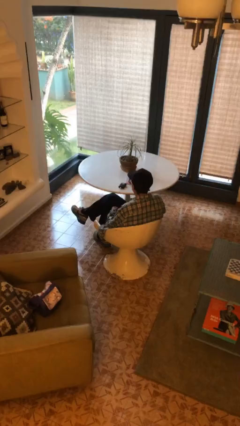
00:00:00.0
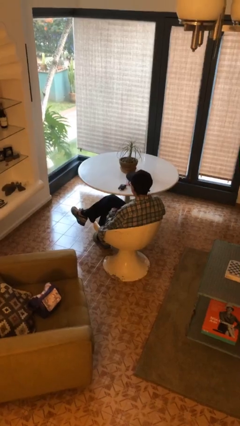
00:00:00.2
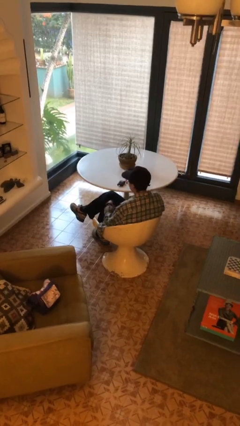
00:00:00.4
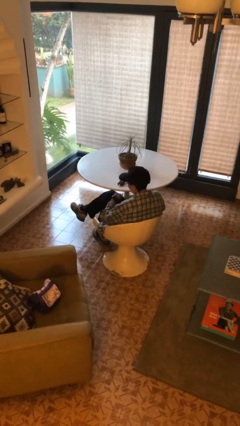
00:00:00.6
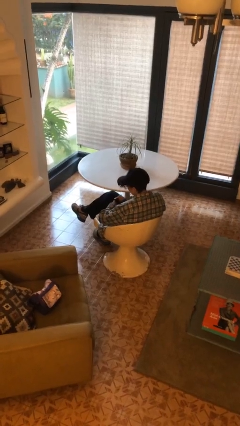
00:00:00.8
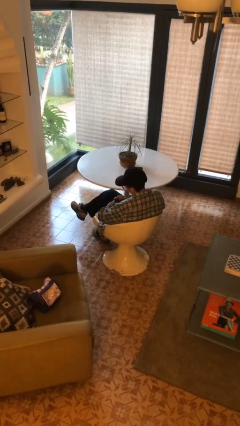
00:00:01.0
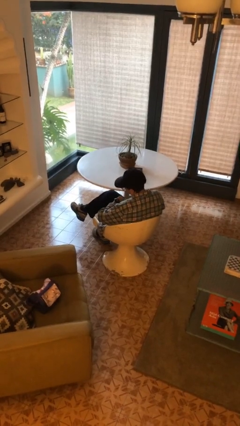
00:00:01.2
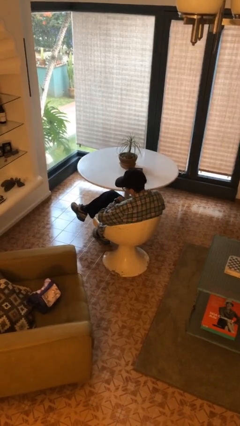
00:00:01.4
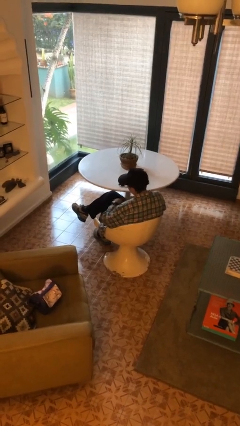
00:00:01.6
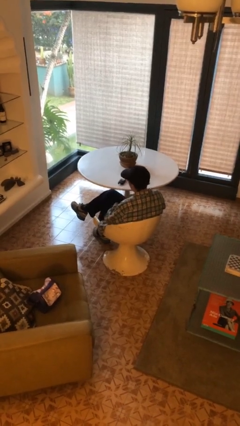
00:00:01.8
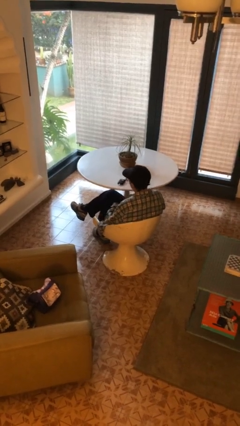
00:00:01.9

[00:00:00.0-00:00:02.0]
person looks at wristwatch

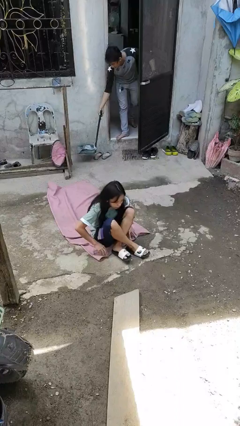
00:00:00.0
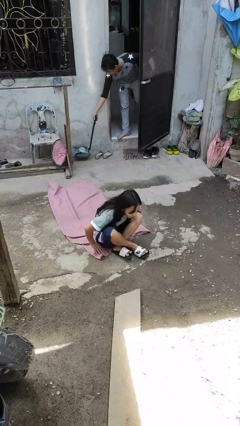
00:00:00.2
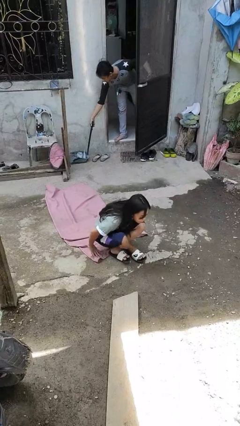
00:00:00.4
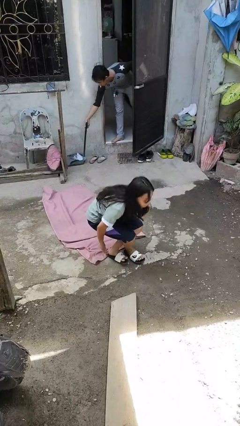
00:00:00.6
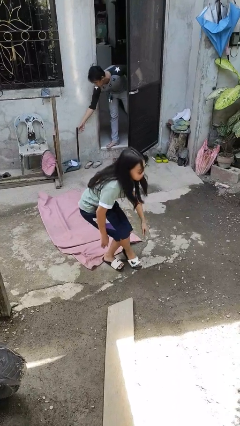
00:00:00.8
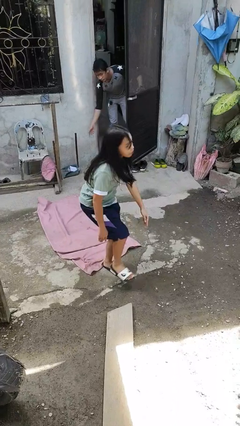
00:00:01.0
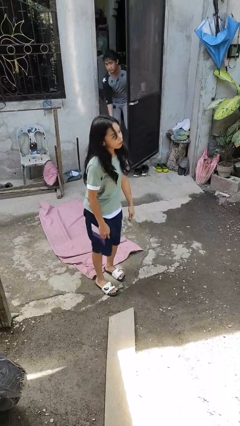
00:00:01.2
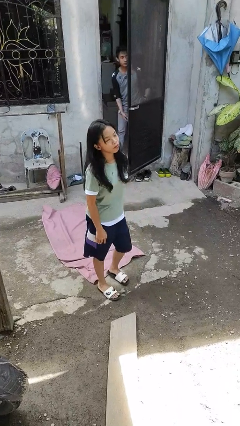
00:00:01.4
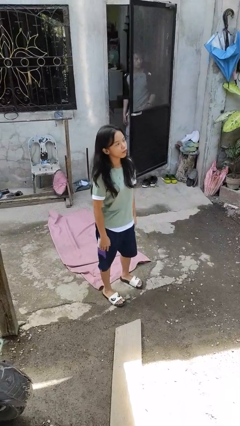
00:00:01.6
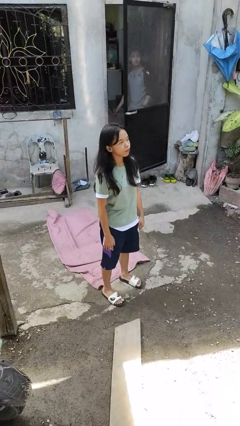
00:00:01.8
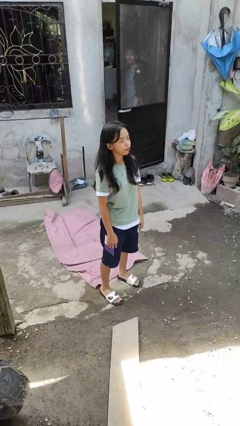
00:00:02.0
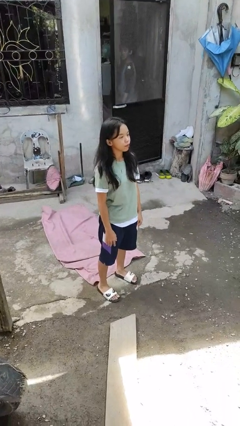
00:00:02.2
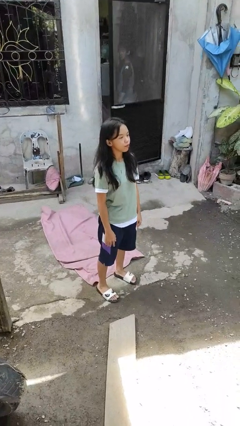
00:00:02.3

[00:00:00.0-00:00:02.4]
person stands up from floor

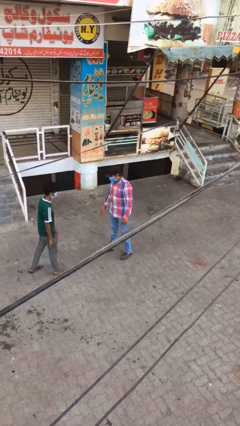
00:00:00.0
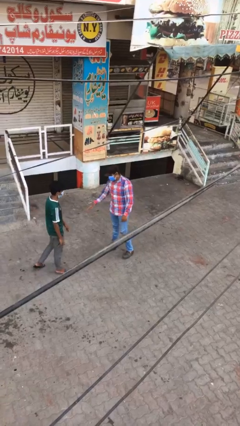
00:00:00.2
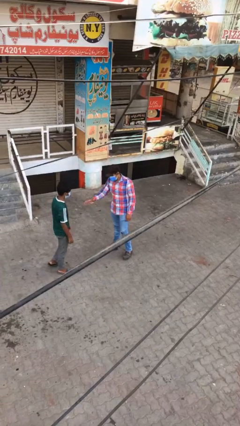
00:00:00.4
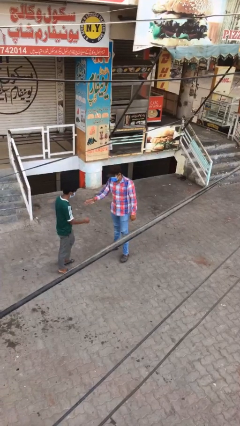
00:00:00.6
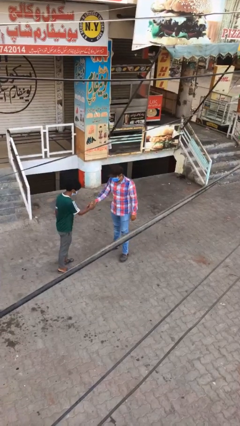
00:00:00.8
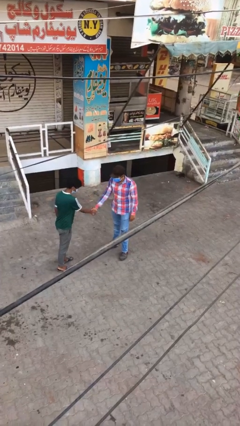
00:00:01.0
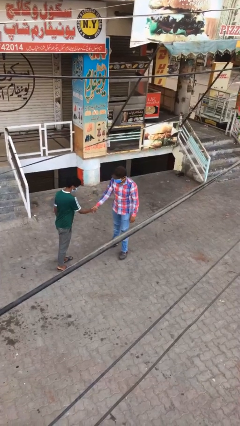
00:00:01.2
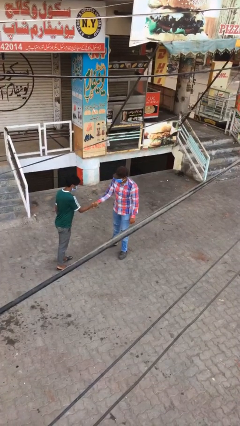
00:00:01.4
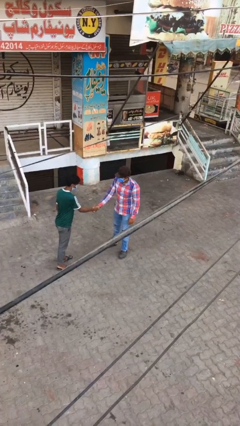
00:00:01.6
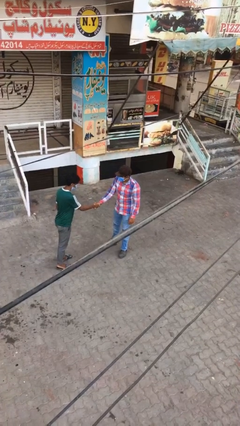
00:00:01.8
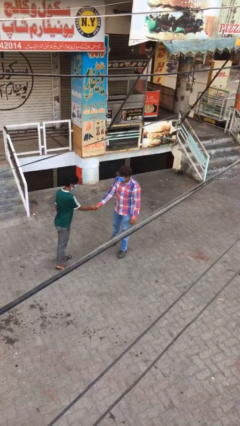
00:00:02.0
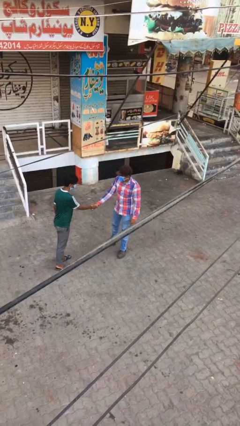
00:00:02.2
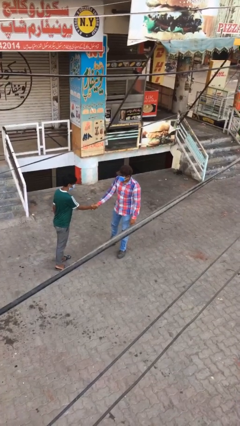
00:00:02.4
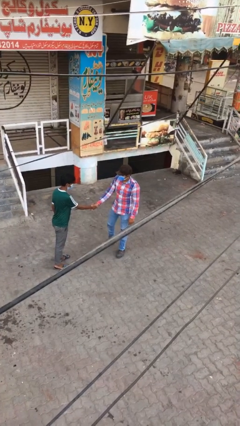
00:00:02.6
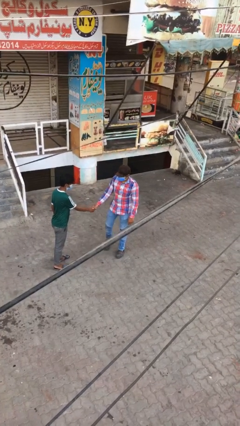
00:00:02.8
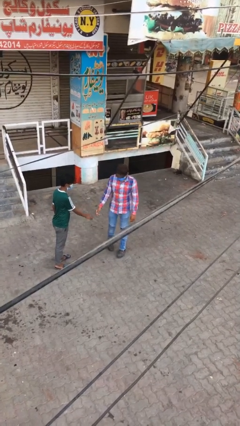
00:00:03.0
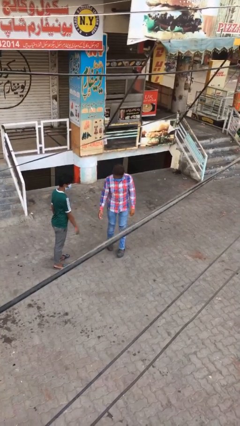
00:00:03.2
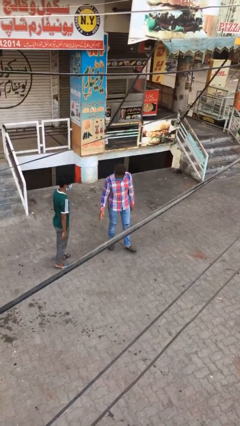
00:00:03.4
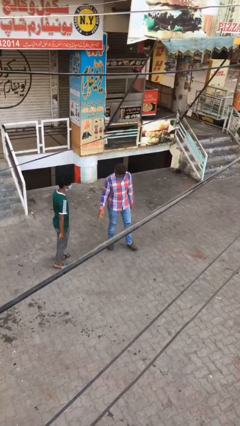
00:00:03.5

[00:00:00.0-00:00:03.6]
person shakes hand

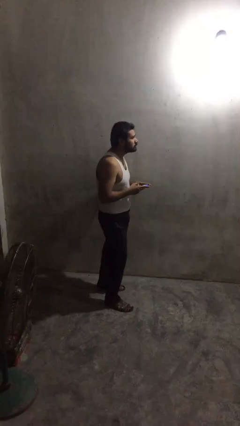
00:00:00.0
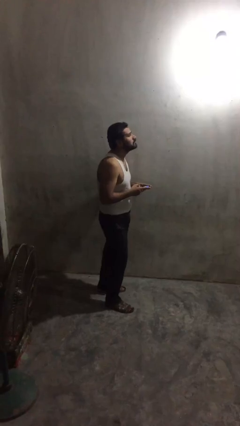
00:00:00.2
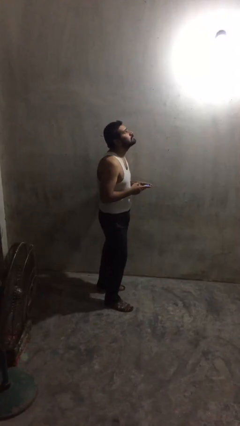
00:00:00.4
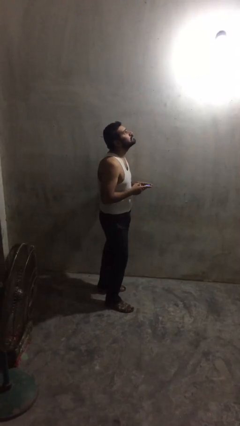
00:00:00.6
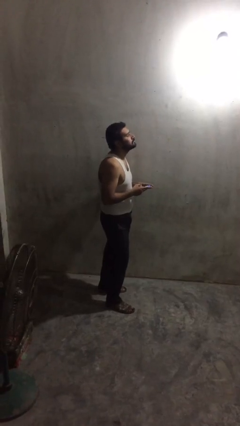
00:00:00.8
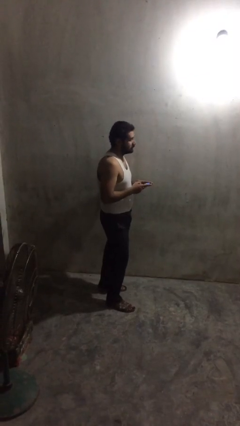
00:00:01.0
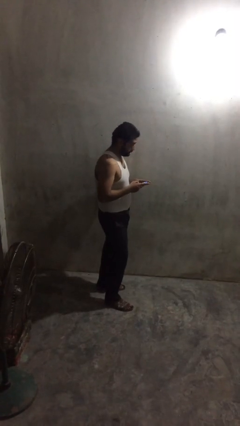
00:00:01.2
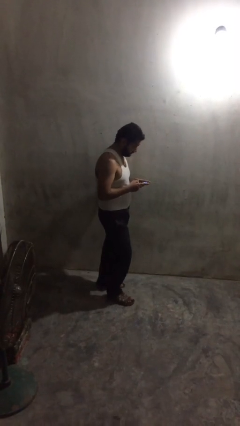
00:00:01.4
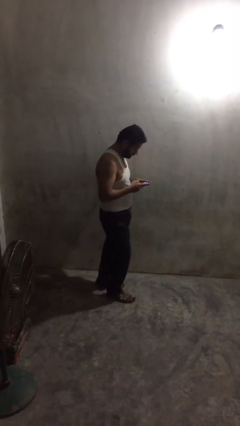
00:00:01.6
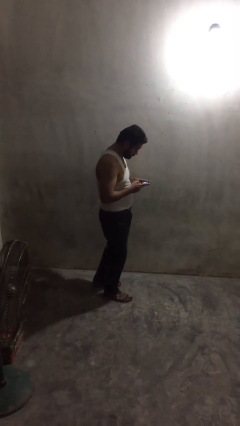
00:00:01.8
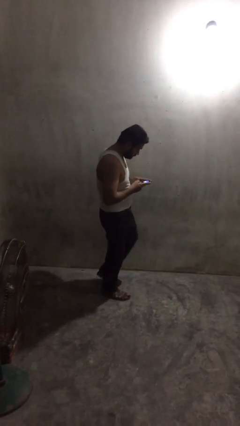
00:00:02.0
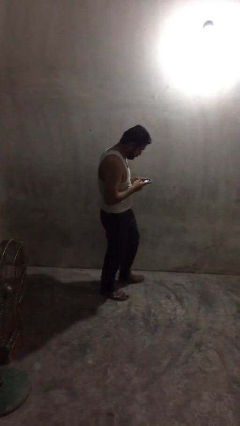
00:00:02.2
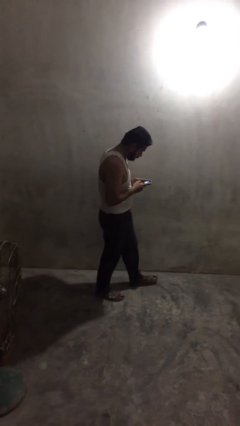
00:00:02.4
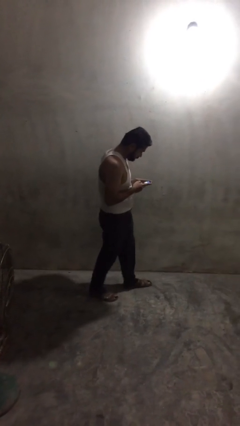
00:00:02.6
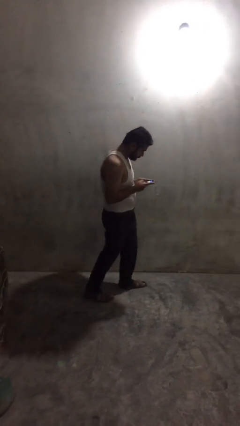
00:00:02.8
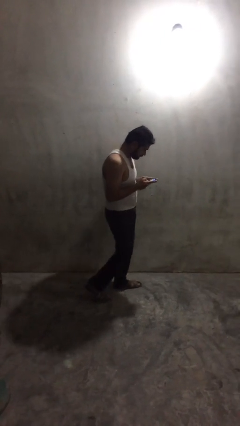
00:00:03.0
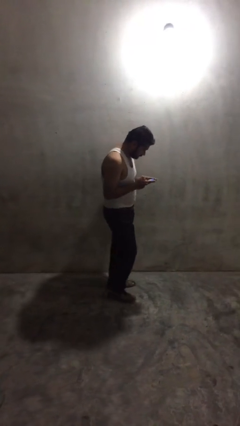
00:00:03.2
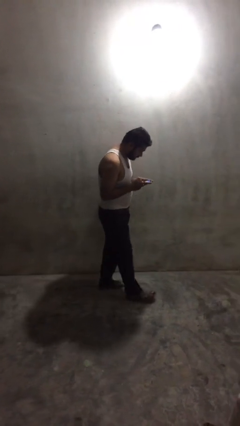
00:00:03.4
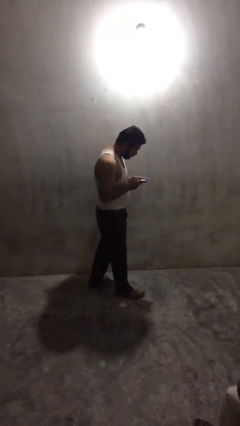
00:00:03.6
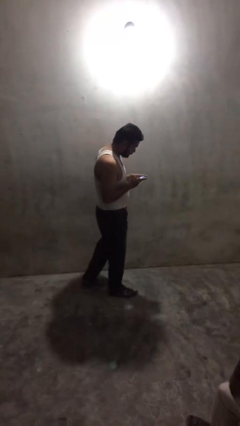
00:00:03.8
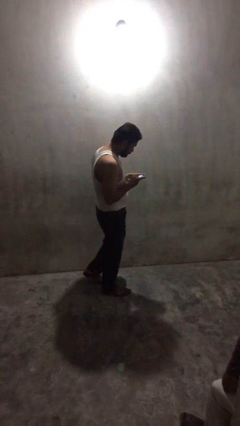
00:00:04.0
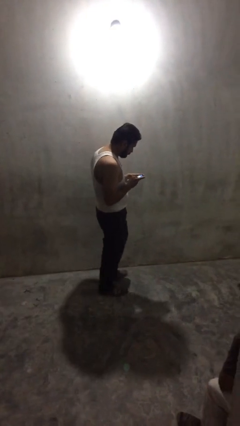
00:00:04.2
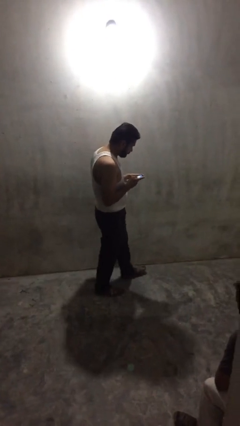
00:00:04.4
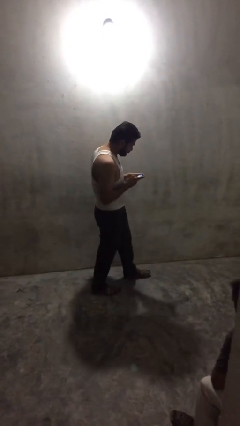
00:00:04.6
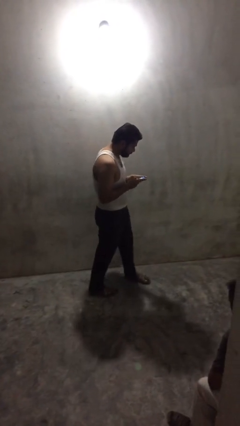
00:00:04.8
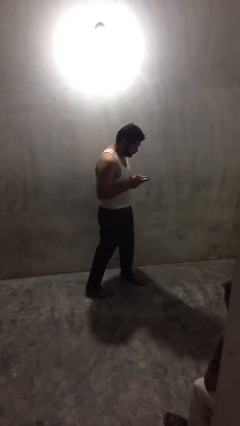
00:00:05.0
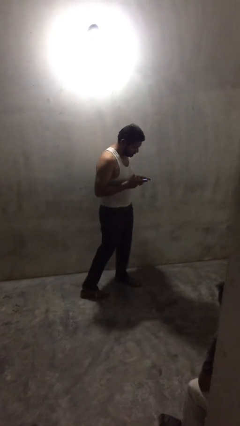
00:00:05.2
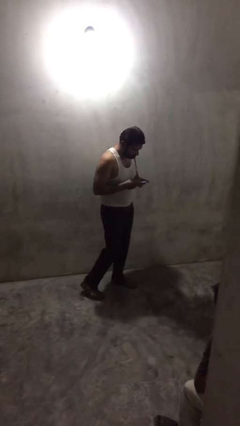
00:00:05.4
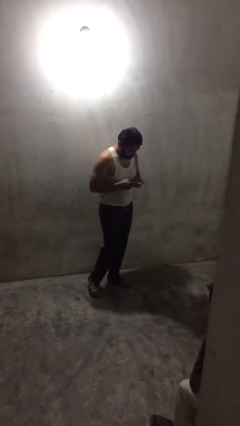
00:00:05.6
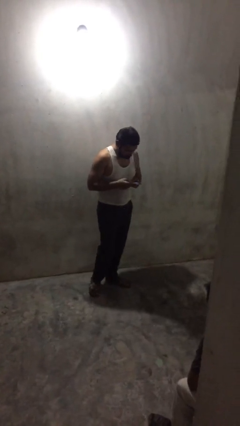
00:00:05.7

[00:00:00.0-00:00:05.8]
person texts on phone

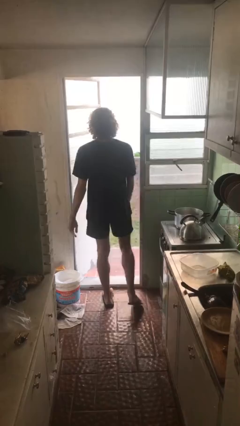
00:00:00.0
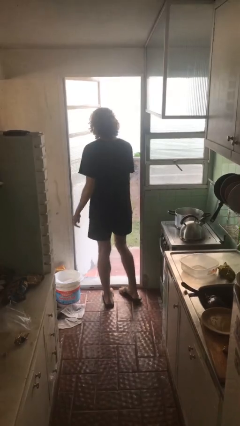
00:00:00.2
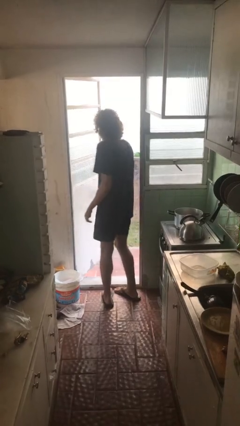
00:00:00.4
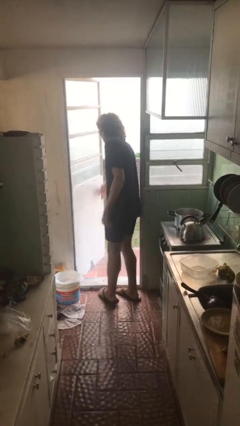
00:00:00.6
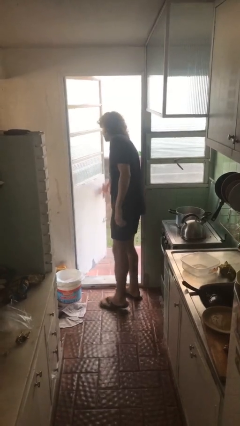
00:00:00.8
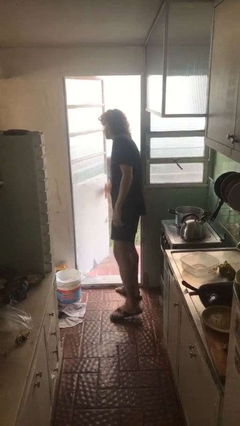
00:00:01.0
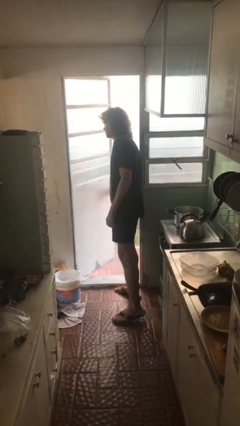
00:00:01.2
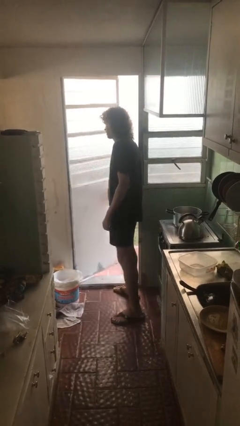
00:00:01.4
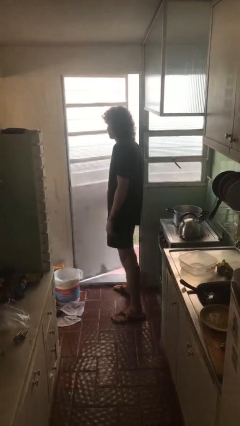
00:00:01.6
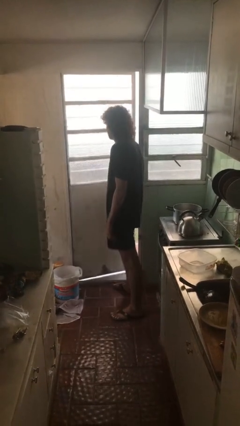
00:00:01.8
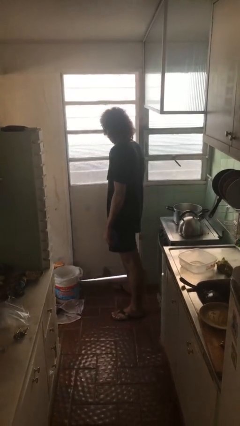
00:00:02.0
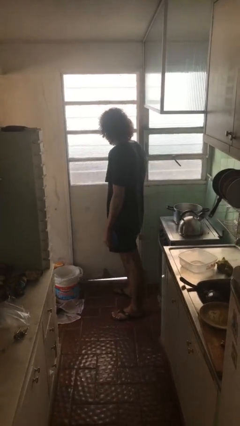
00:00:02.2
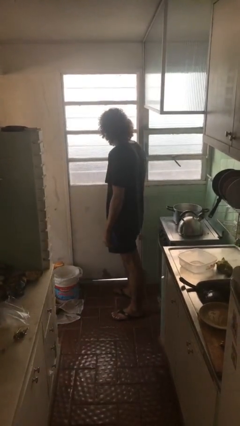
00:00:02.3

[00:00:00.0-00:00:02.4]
person closes facility door

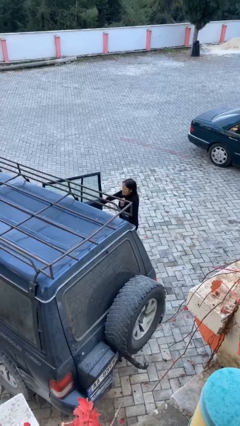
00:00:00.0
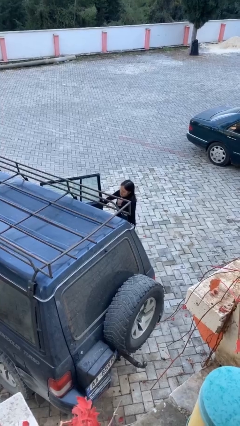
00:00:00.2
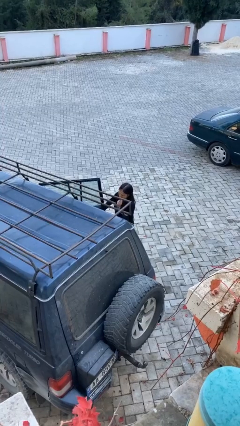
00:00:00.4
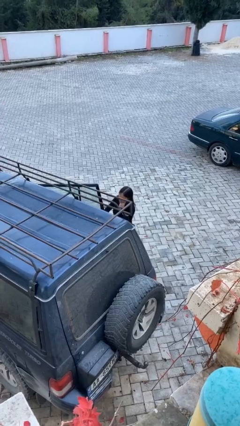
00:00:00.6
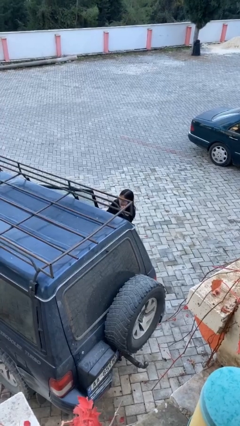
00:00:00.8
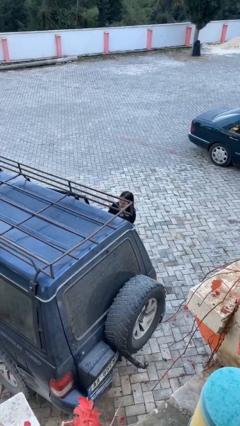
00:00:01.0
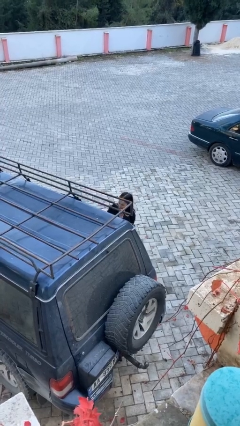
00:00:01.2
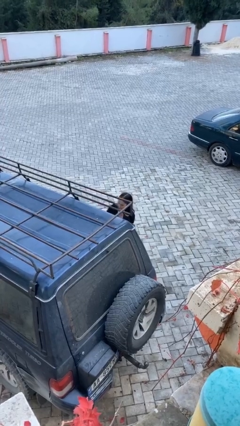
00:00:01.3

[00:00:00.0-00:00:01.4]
person closes car door
